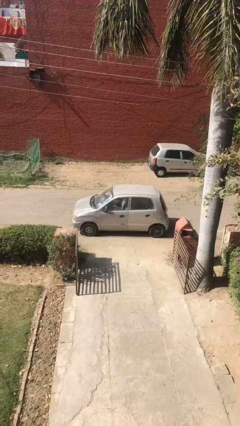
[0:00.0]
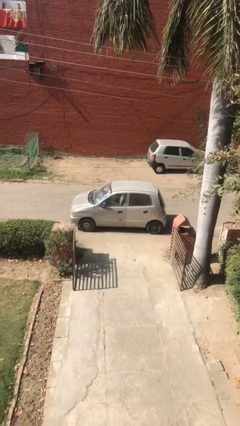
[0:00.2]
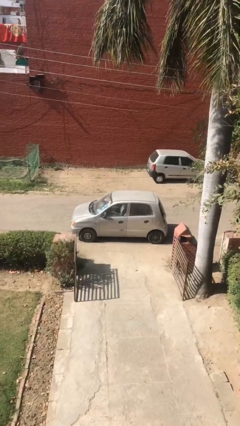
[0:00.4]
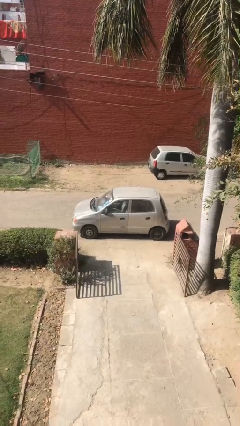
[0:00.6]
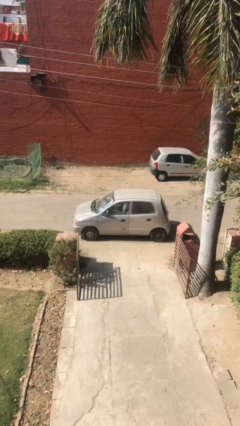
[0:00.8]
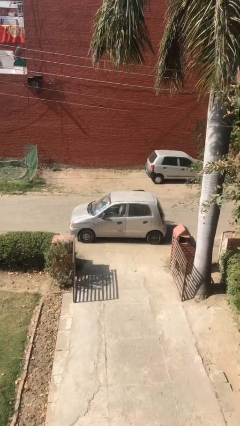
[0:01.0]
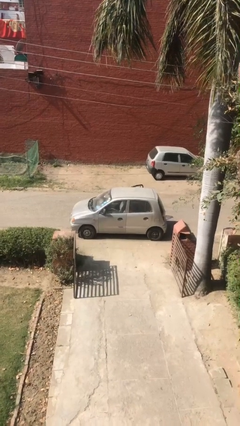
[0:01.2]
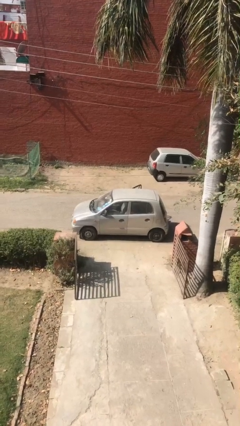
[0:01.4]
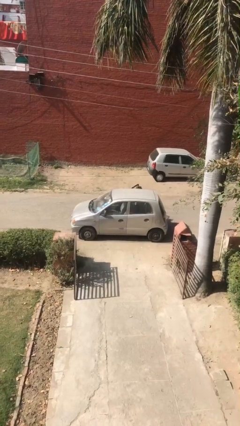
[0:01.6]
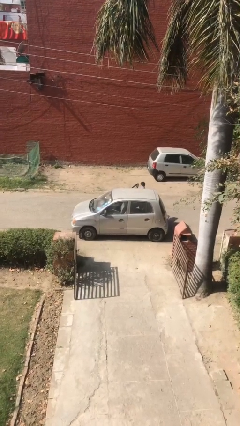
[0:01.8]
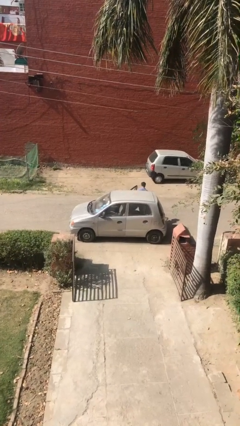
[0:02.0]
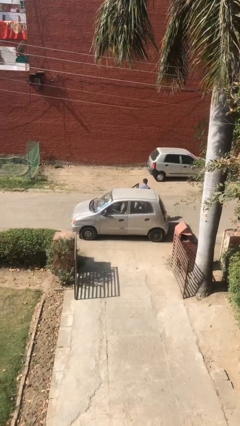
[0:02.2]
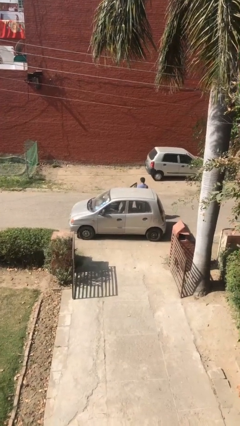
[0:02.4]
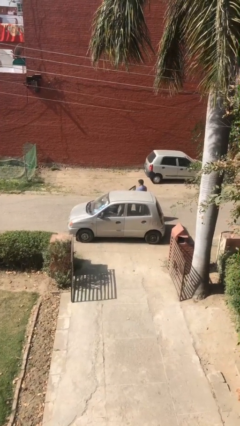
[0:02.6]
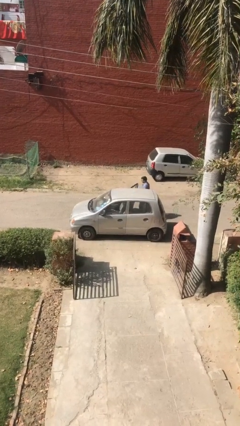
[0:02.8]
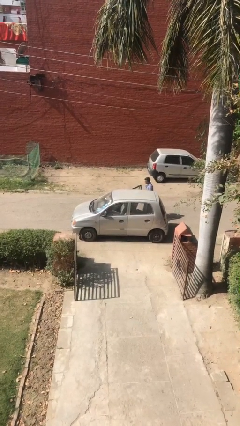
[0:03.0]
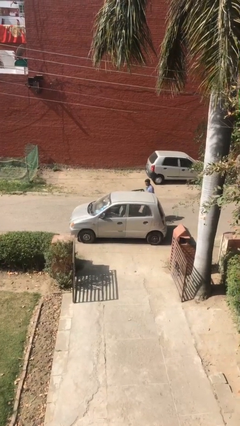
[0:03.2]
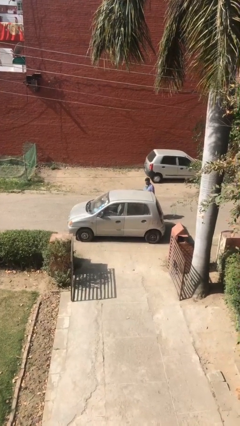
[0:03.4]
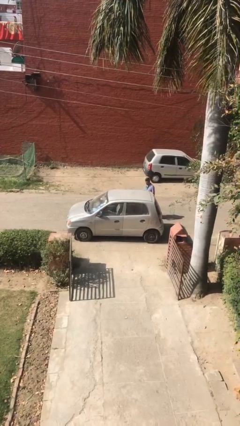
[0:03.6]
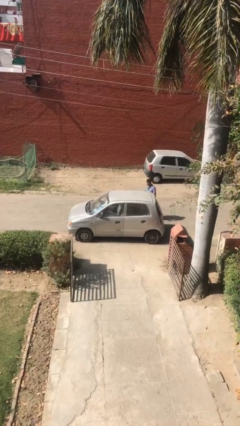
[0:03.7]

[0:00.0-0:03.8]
car drops off person

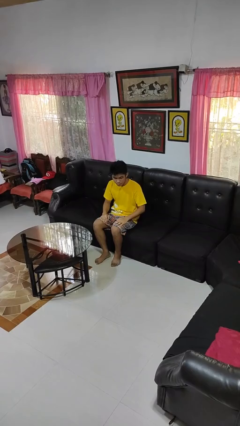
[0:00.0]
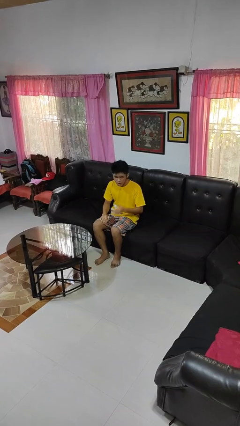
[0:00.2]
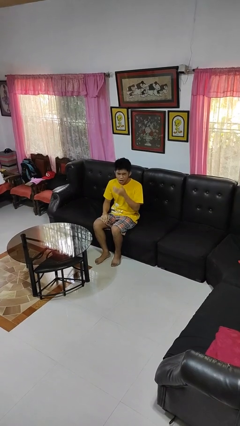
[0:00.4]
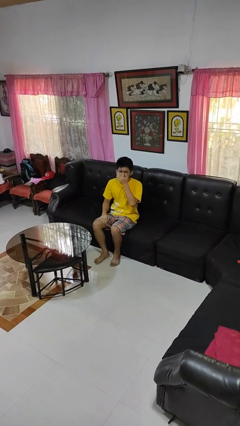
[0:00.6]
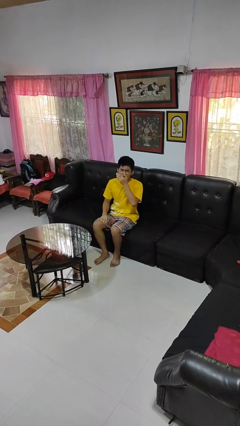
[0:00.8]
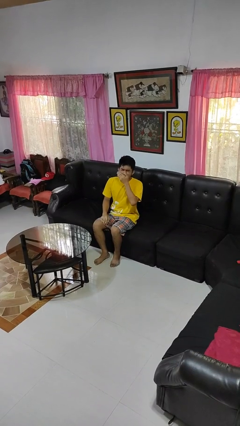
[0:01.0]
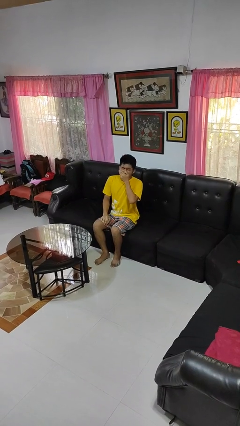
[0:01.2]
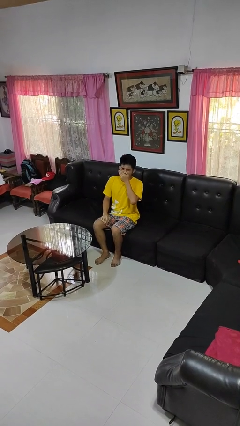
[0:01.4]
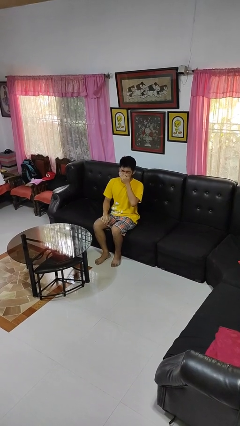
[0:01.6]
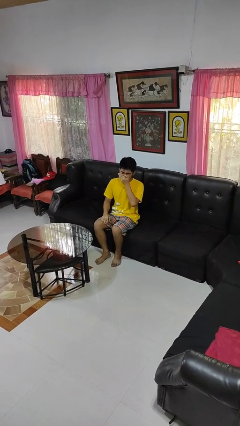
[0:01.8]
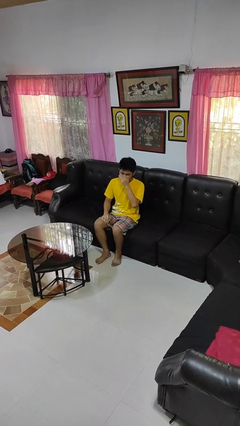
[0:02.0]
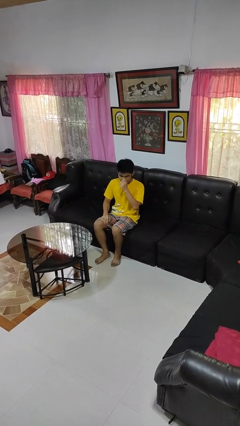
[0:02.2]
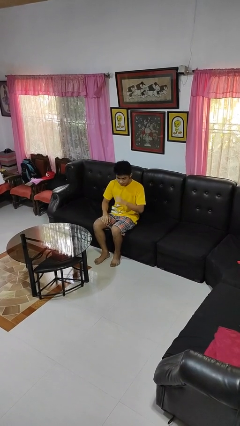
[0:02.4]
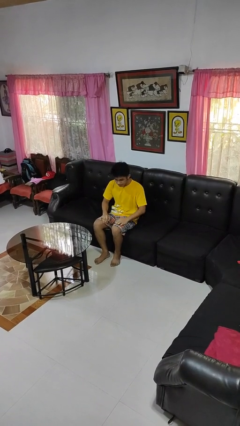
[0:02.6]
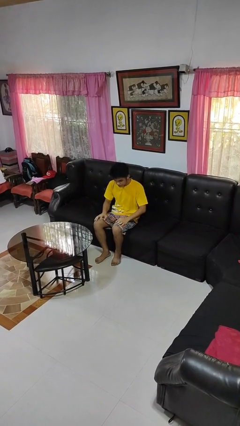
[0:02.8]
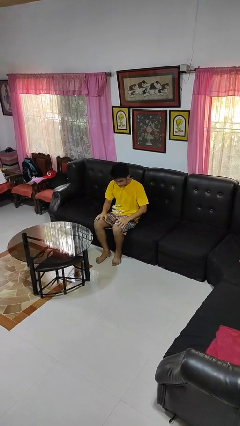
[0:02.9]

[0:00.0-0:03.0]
person yawns

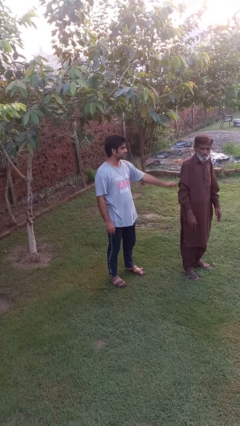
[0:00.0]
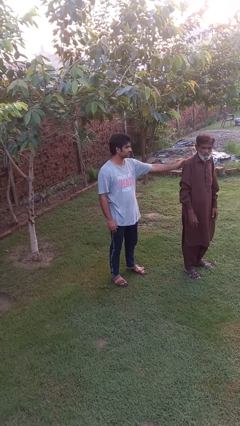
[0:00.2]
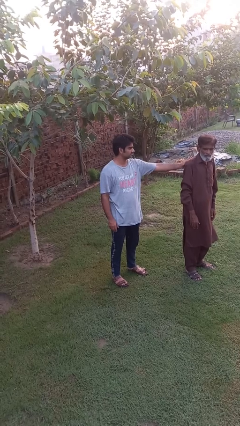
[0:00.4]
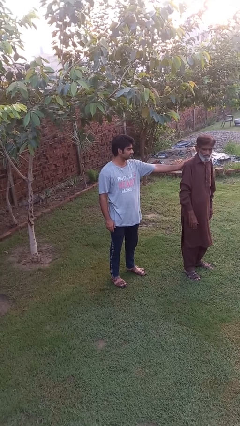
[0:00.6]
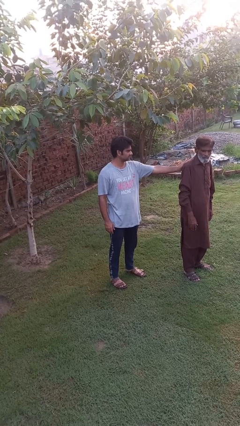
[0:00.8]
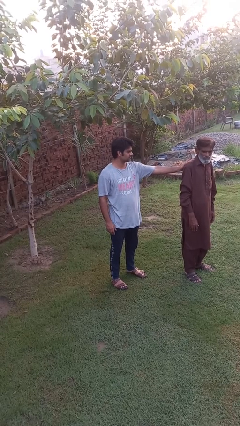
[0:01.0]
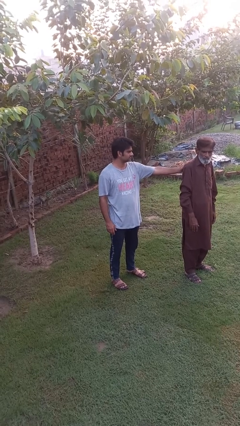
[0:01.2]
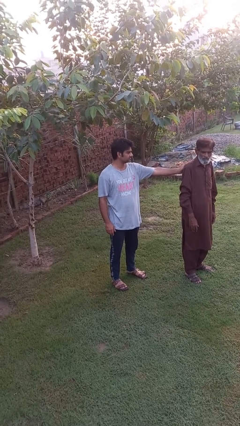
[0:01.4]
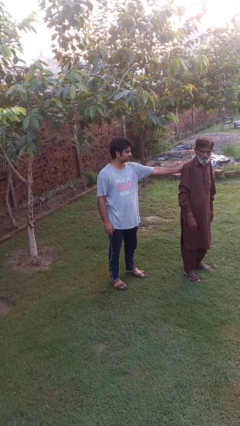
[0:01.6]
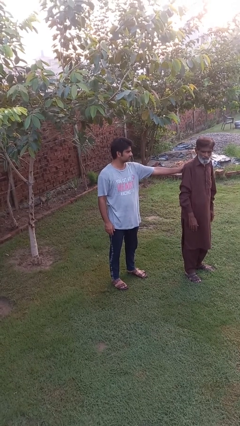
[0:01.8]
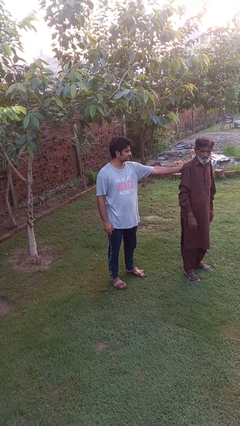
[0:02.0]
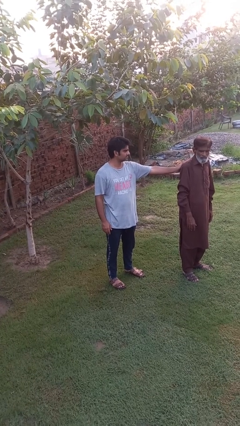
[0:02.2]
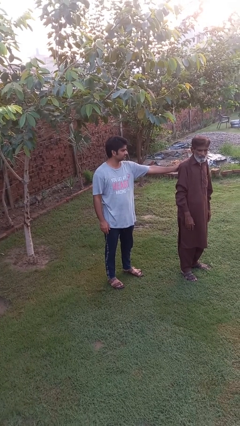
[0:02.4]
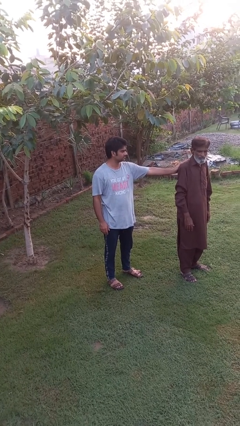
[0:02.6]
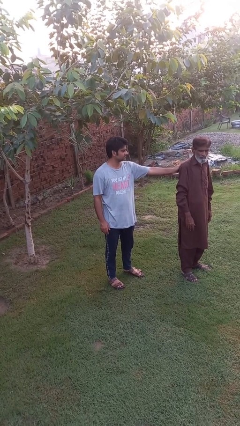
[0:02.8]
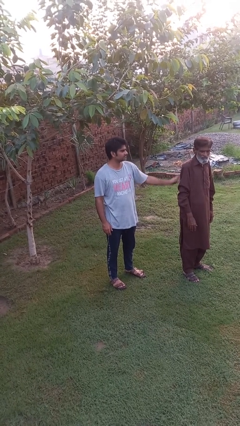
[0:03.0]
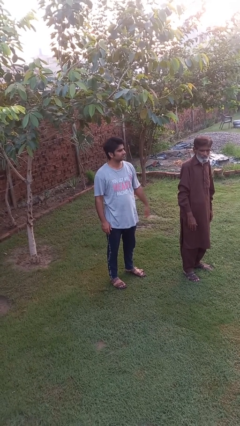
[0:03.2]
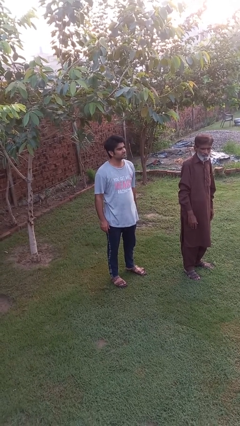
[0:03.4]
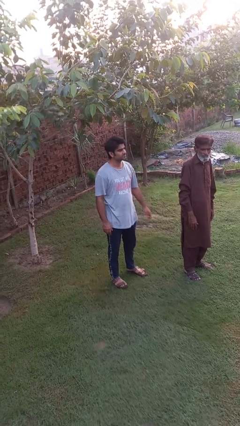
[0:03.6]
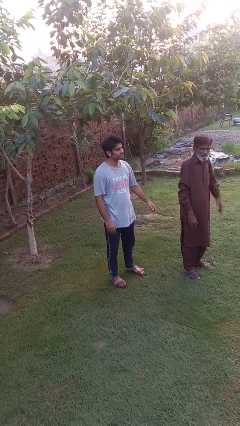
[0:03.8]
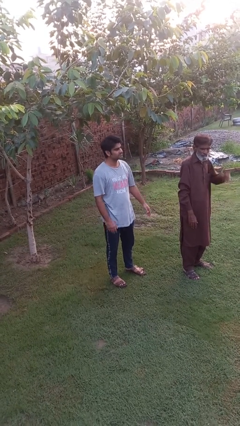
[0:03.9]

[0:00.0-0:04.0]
person touches back of person

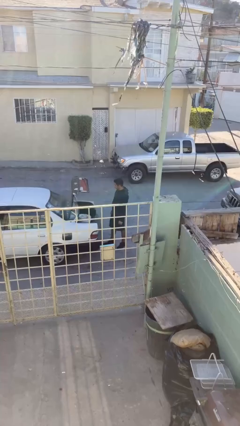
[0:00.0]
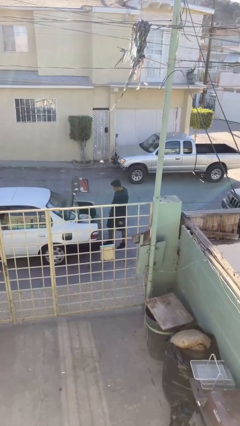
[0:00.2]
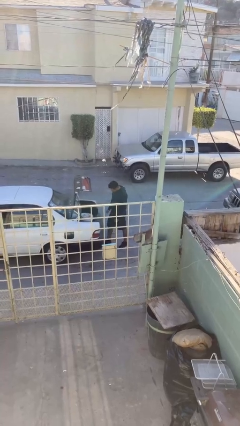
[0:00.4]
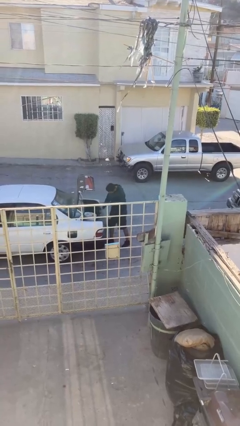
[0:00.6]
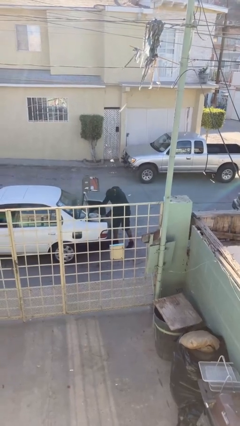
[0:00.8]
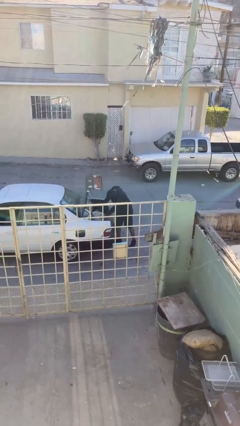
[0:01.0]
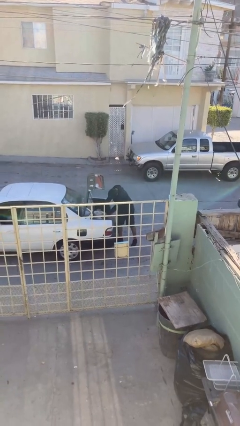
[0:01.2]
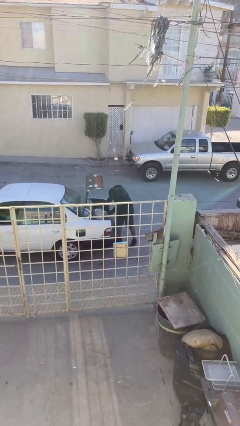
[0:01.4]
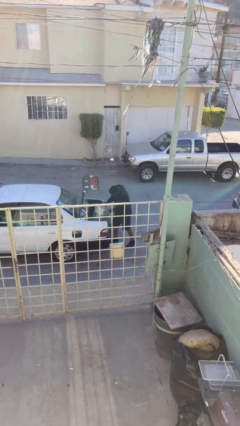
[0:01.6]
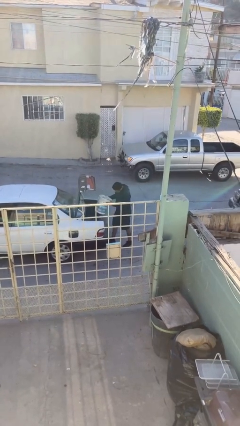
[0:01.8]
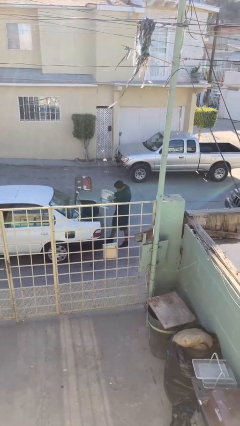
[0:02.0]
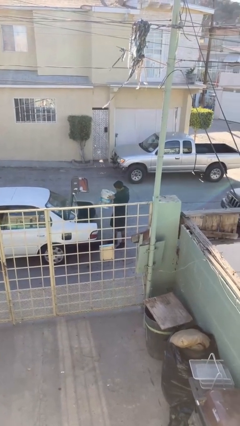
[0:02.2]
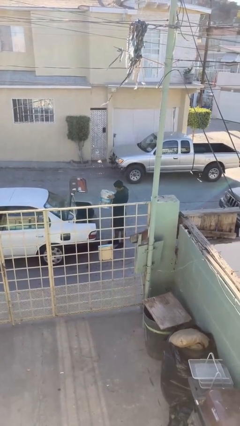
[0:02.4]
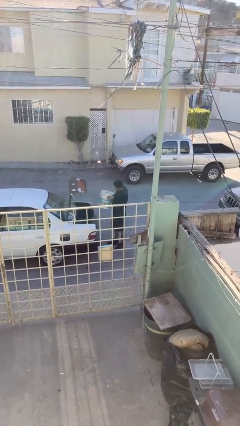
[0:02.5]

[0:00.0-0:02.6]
person unloads car

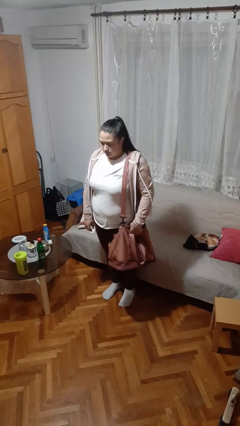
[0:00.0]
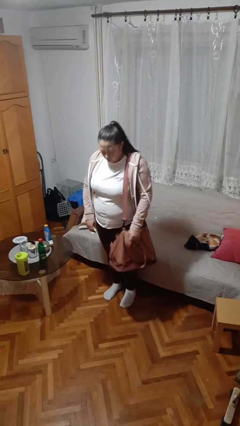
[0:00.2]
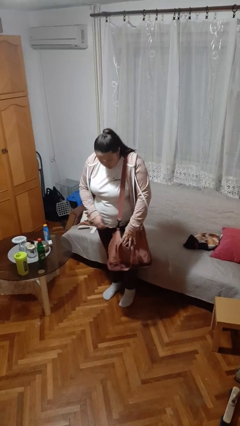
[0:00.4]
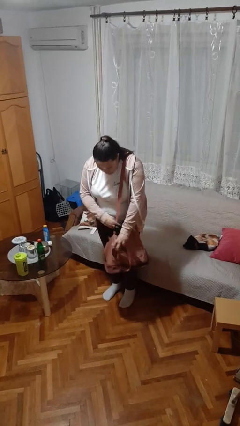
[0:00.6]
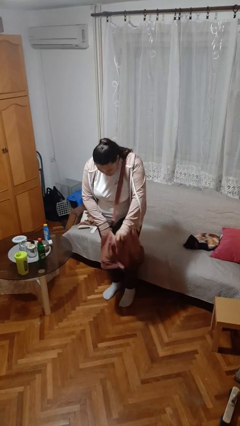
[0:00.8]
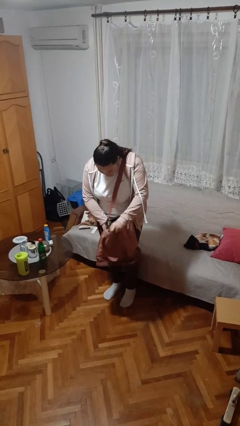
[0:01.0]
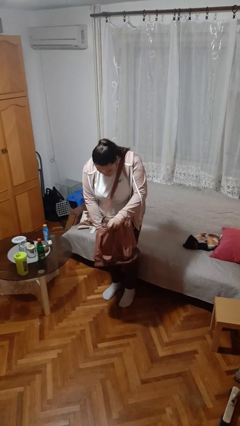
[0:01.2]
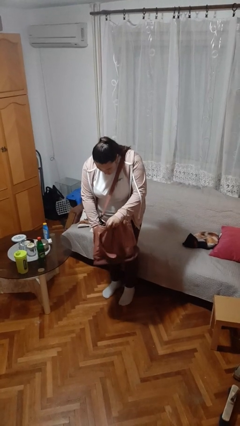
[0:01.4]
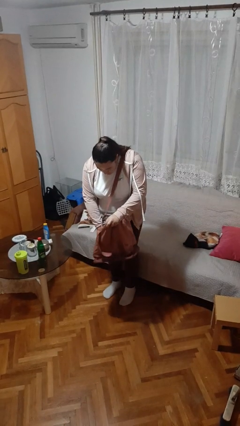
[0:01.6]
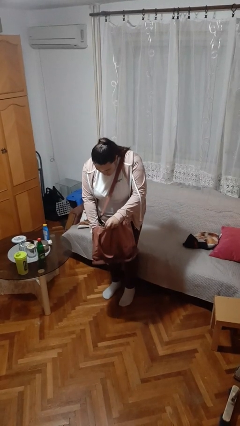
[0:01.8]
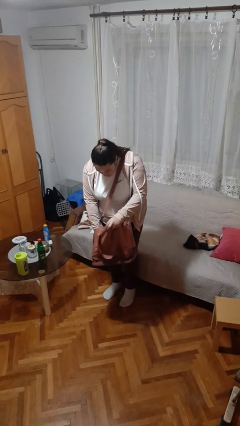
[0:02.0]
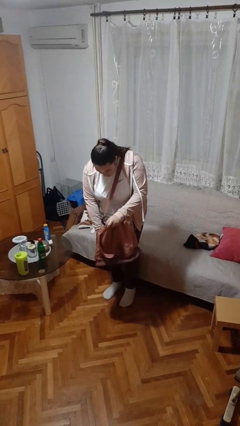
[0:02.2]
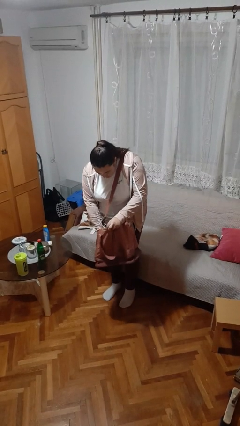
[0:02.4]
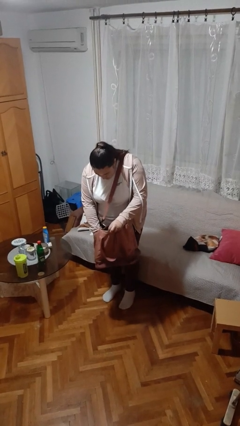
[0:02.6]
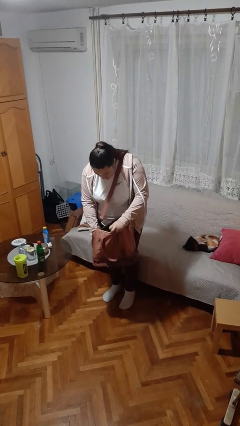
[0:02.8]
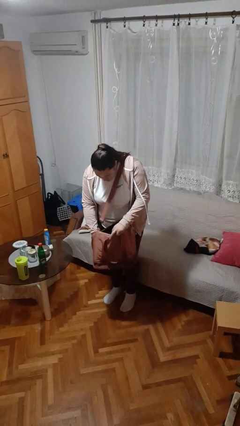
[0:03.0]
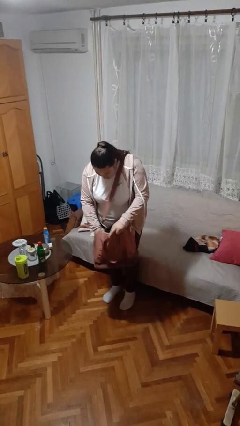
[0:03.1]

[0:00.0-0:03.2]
person searches in purse

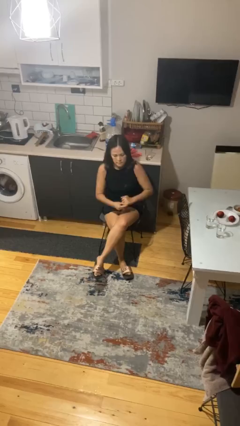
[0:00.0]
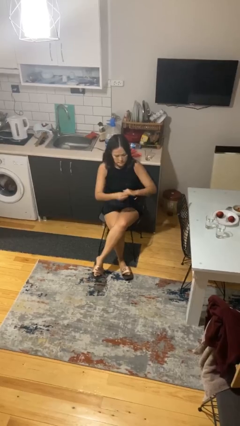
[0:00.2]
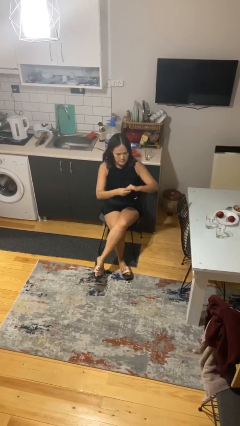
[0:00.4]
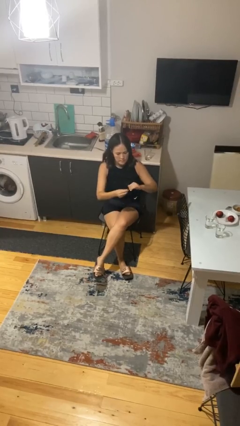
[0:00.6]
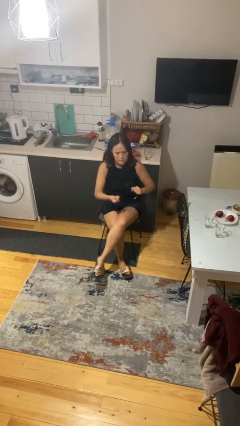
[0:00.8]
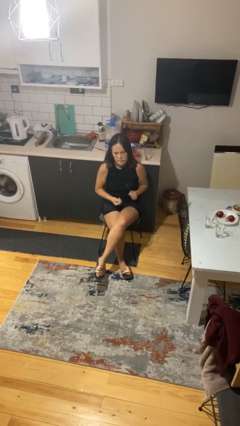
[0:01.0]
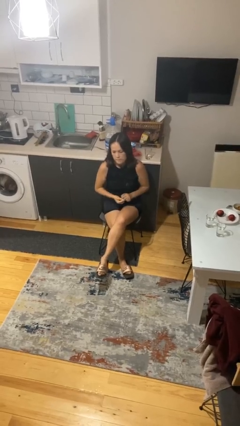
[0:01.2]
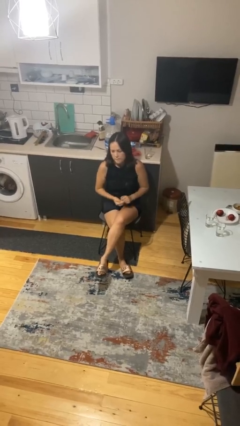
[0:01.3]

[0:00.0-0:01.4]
person takes off ring
